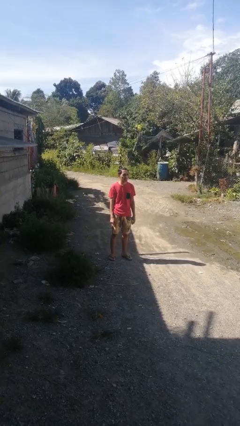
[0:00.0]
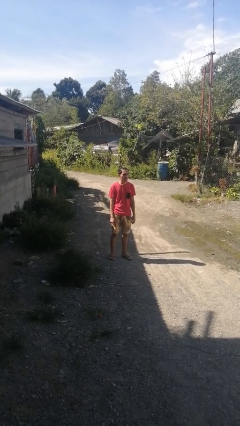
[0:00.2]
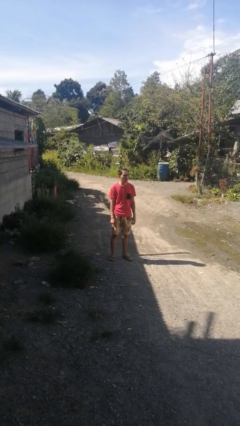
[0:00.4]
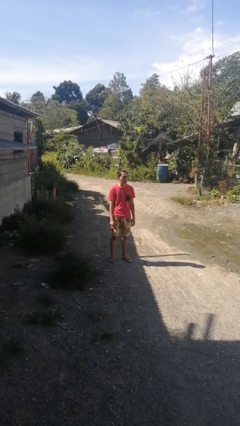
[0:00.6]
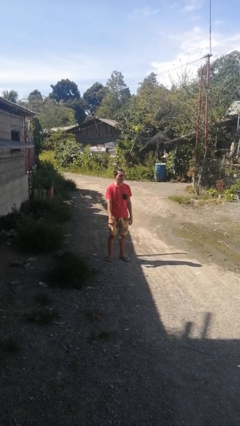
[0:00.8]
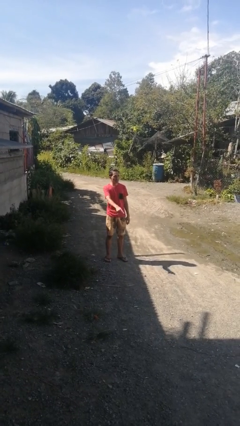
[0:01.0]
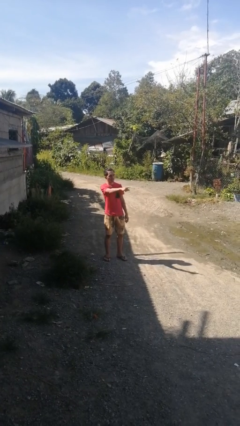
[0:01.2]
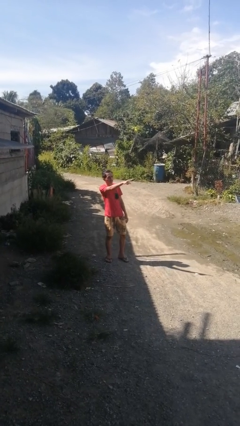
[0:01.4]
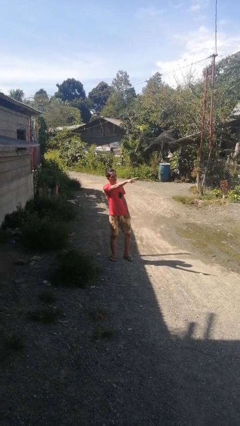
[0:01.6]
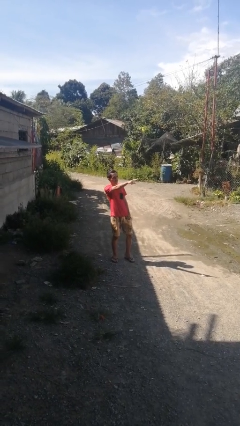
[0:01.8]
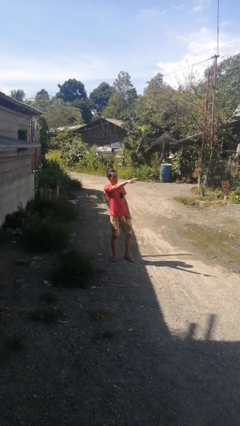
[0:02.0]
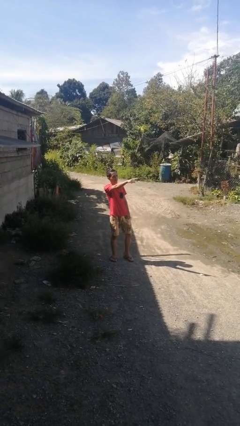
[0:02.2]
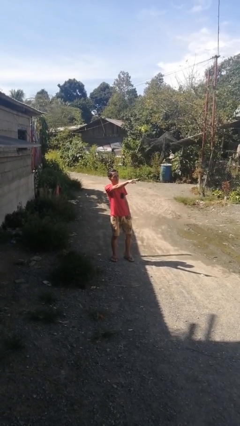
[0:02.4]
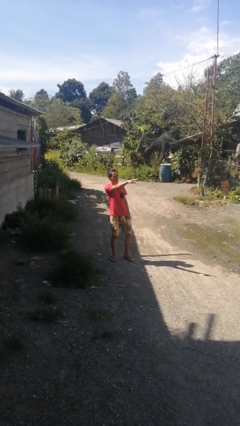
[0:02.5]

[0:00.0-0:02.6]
person points at person

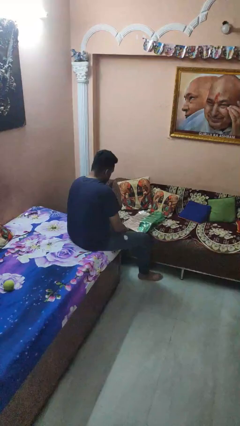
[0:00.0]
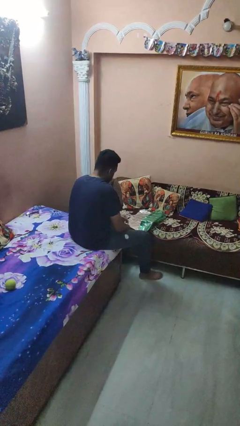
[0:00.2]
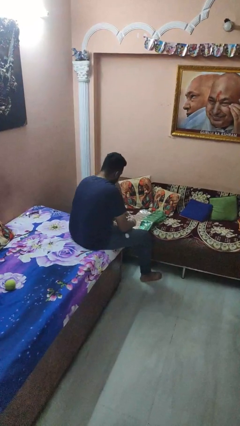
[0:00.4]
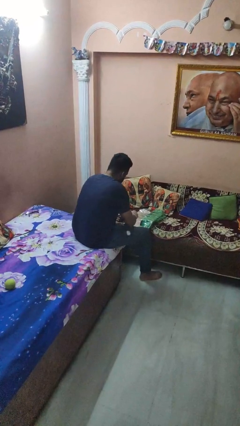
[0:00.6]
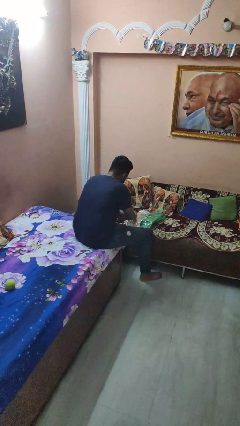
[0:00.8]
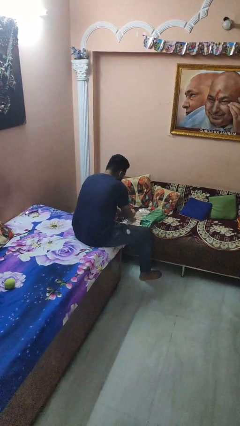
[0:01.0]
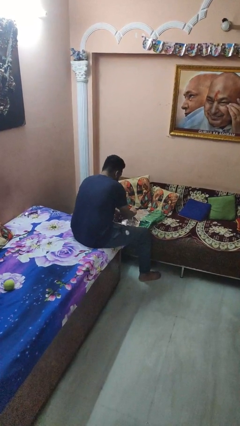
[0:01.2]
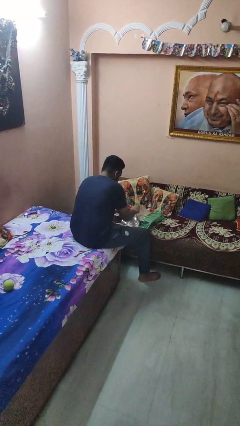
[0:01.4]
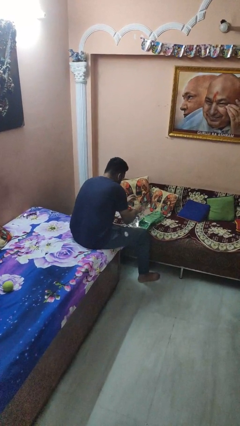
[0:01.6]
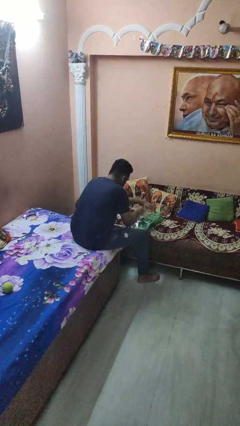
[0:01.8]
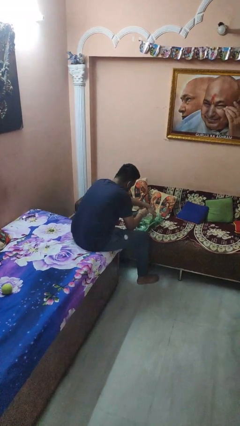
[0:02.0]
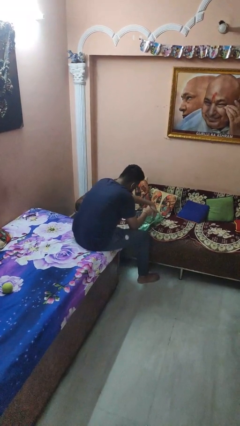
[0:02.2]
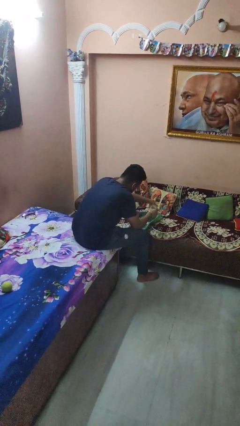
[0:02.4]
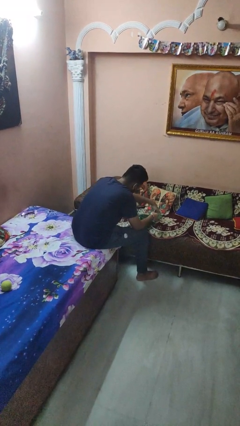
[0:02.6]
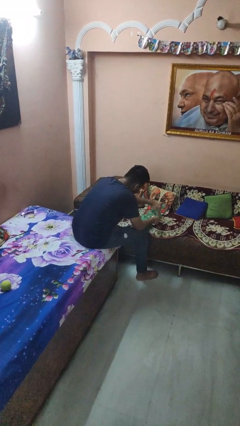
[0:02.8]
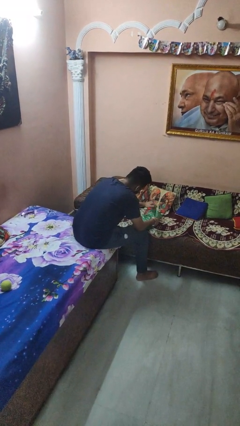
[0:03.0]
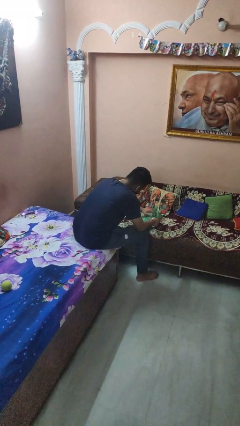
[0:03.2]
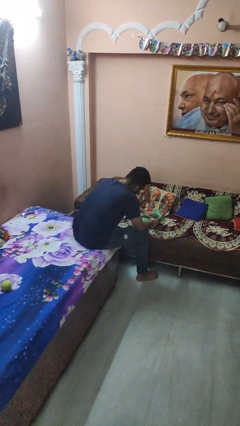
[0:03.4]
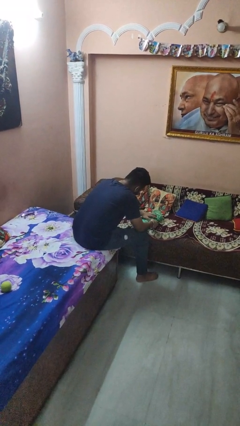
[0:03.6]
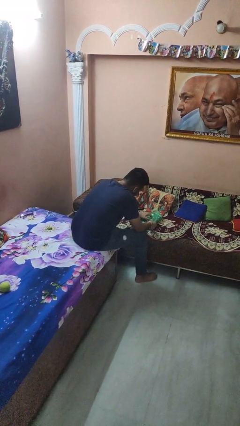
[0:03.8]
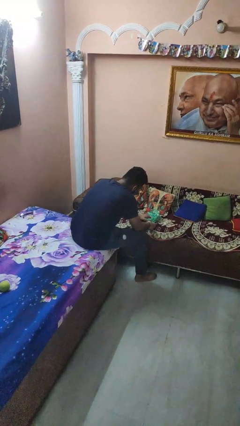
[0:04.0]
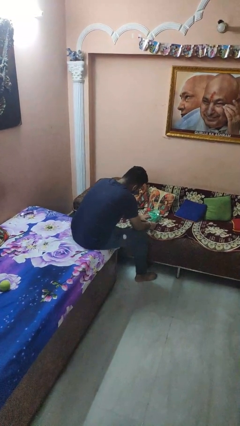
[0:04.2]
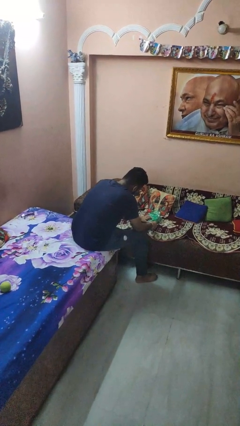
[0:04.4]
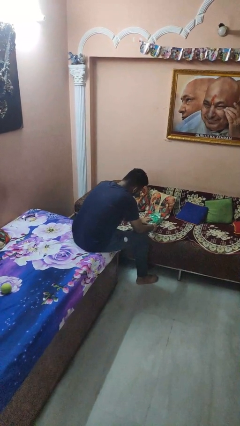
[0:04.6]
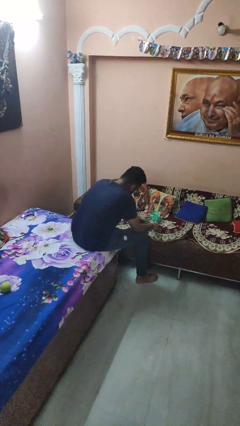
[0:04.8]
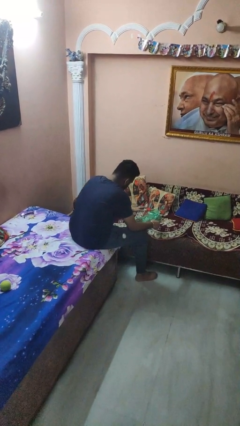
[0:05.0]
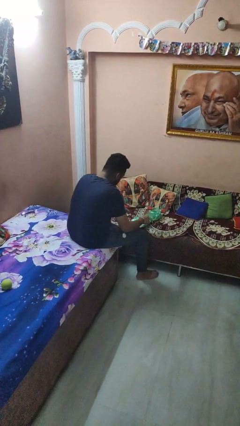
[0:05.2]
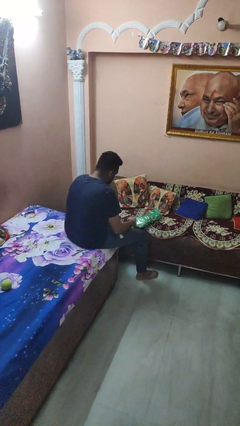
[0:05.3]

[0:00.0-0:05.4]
person wraps box

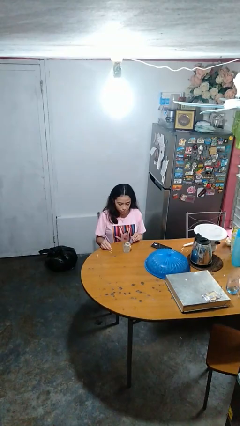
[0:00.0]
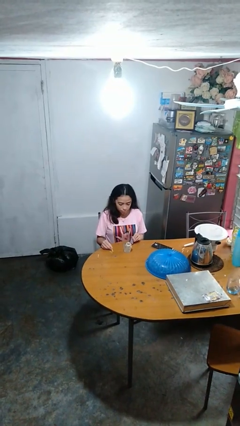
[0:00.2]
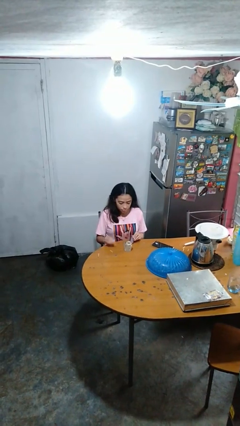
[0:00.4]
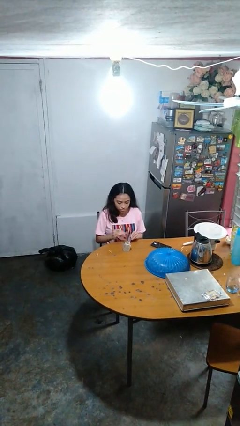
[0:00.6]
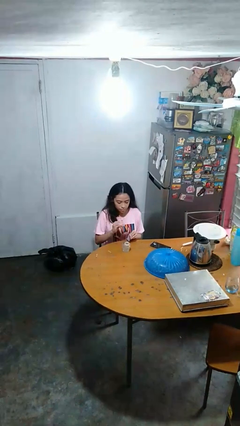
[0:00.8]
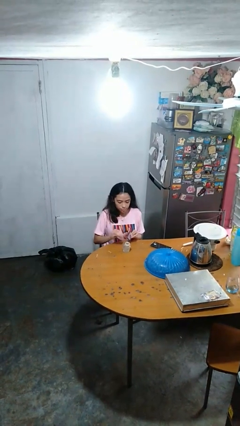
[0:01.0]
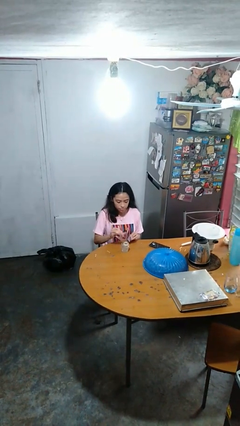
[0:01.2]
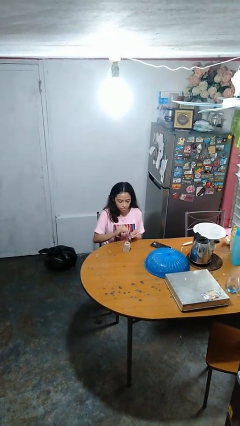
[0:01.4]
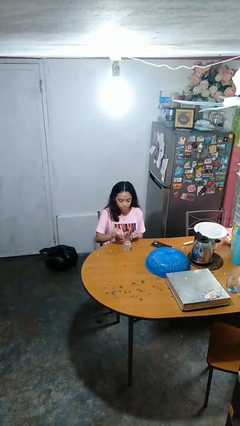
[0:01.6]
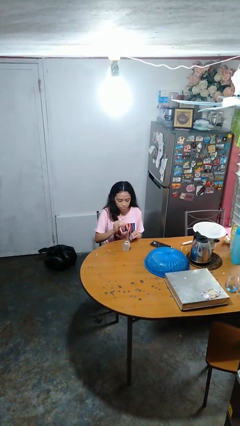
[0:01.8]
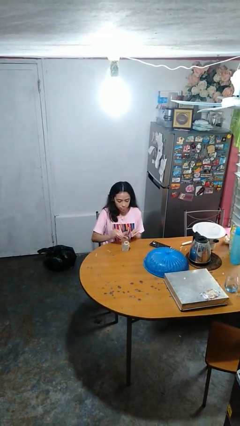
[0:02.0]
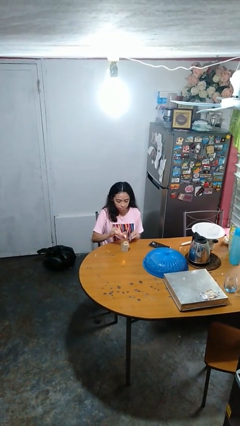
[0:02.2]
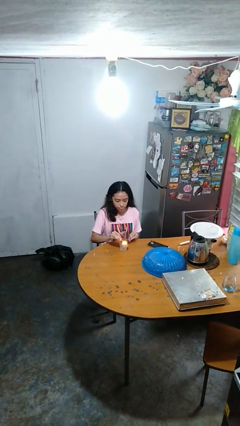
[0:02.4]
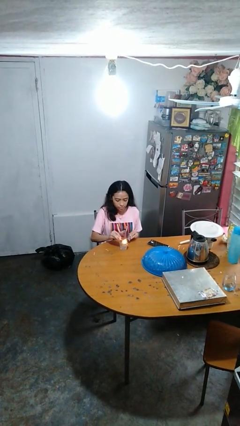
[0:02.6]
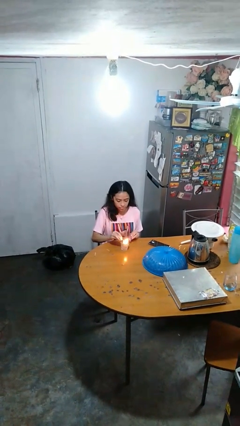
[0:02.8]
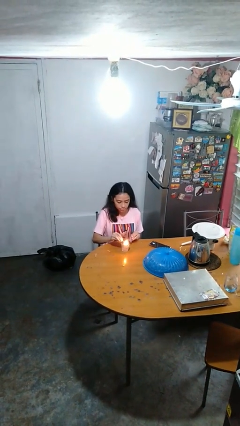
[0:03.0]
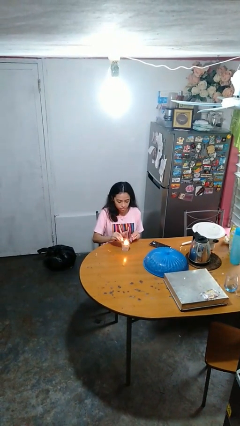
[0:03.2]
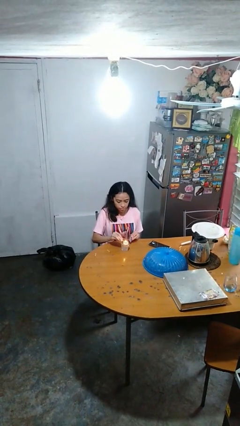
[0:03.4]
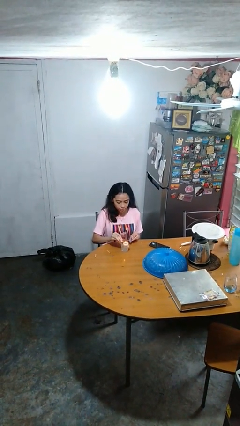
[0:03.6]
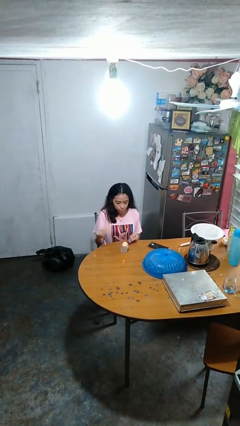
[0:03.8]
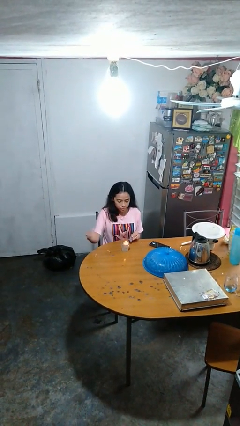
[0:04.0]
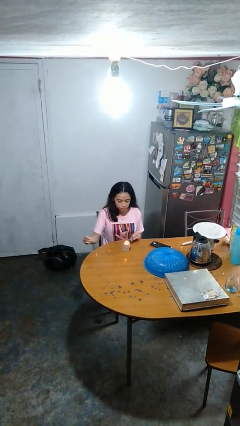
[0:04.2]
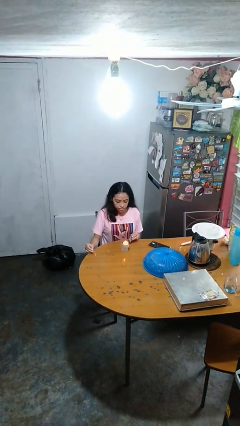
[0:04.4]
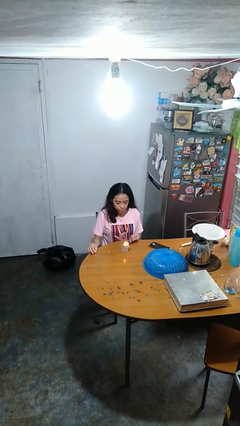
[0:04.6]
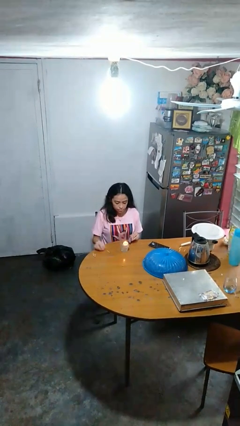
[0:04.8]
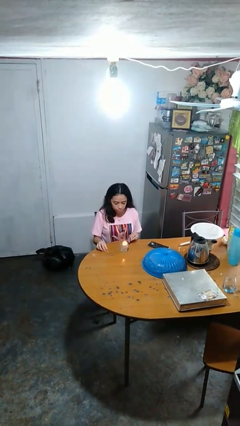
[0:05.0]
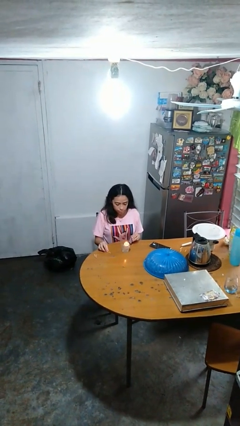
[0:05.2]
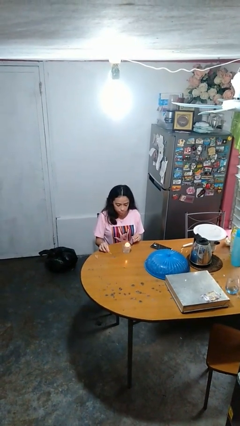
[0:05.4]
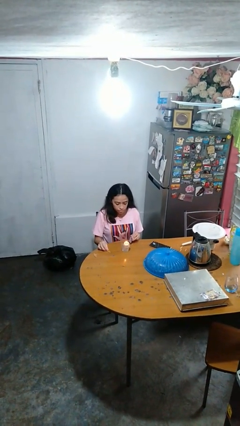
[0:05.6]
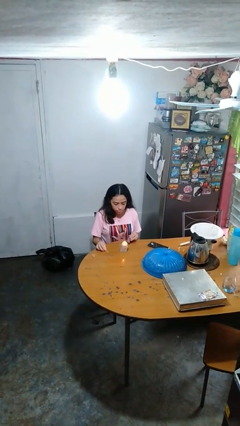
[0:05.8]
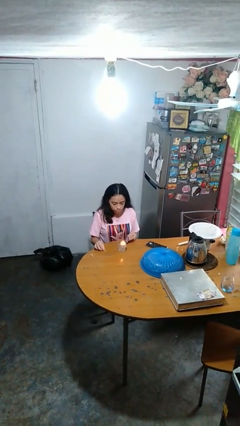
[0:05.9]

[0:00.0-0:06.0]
person lights candle

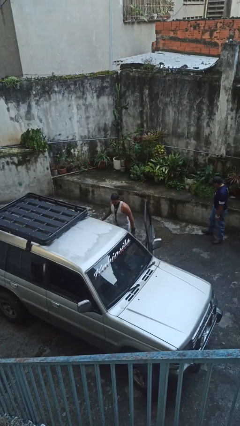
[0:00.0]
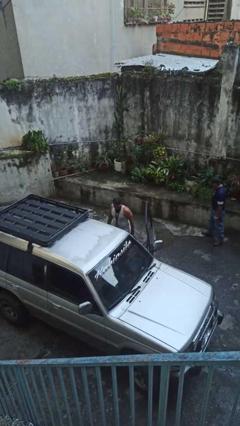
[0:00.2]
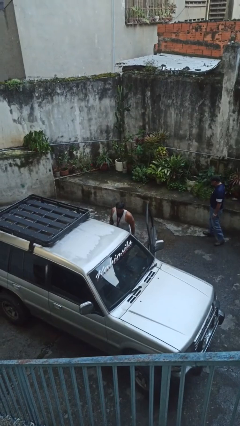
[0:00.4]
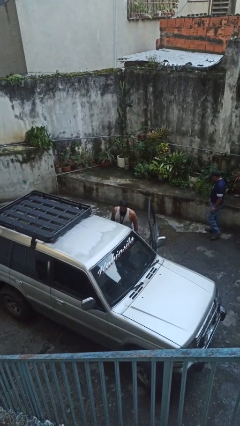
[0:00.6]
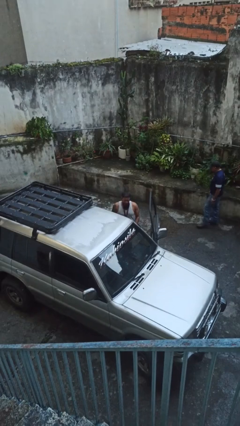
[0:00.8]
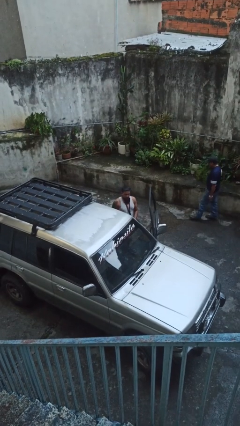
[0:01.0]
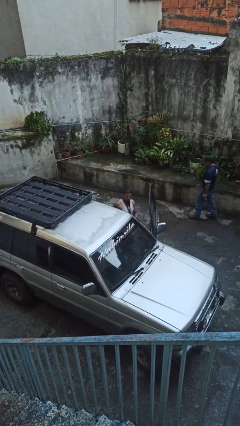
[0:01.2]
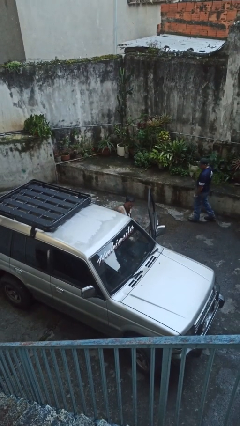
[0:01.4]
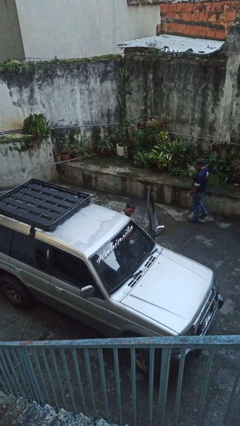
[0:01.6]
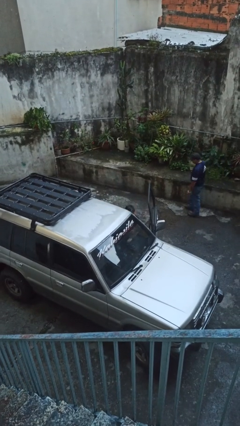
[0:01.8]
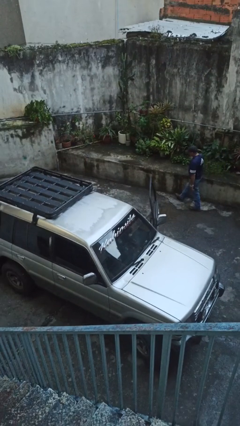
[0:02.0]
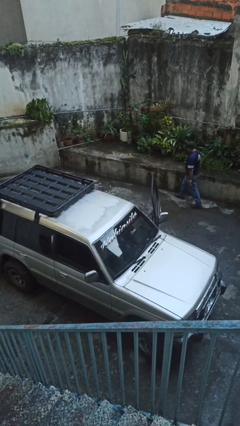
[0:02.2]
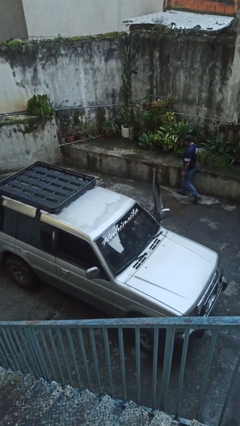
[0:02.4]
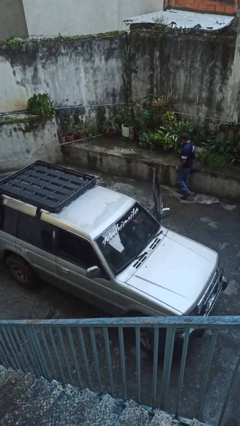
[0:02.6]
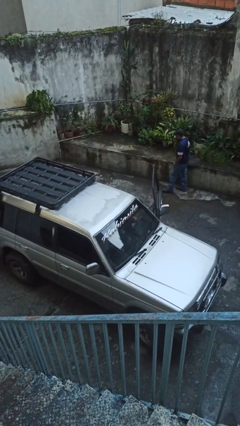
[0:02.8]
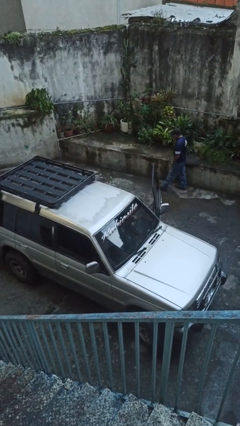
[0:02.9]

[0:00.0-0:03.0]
person enters car

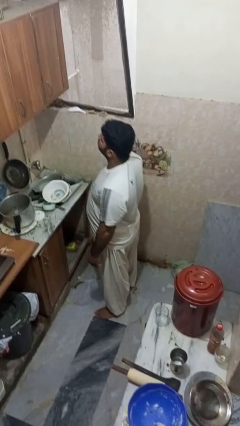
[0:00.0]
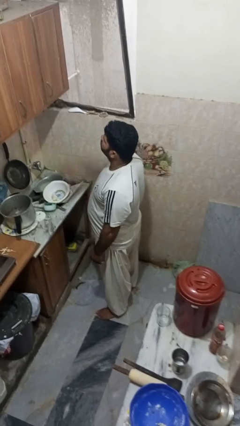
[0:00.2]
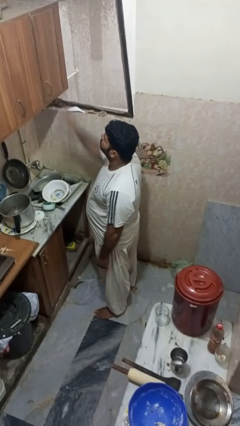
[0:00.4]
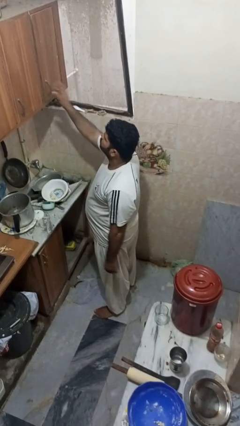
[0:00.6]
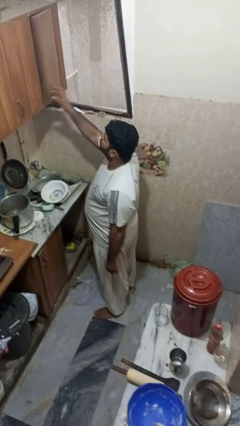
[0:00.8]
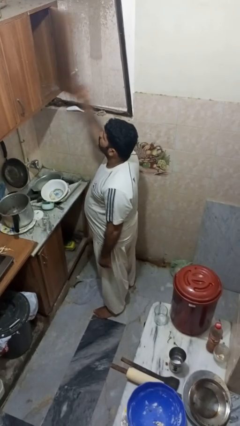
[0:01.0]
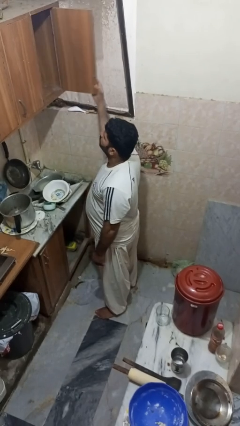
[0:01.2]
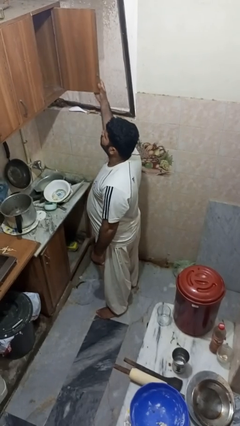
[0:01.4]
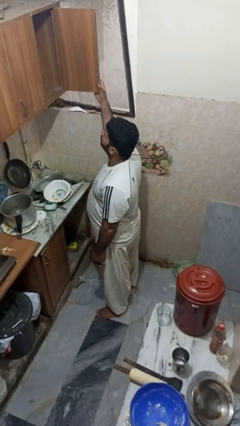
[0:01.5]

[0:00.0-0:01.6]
person opens cabinet
